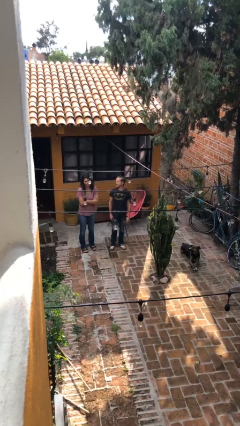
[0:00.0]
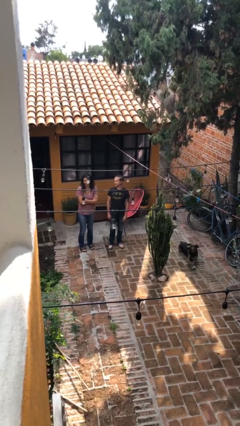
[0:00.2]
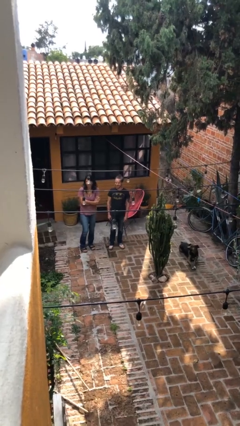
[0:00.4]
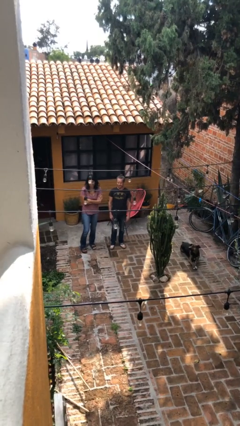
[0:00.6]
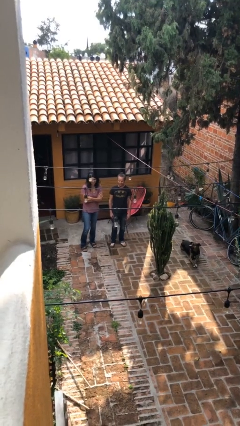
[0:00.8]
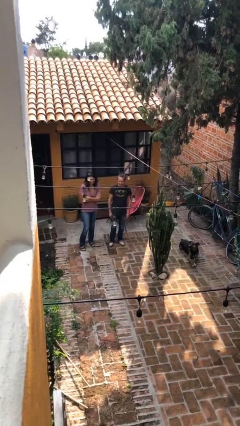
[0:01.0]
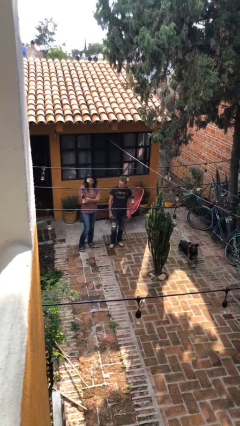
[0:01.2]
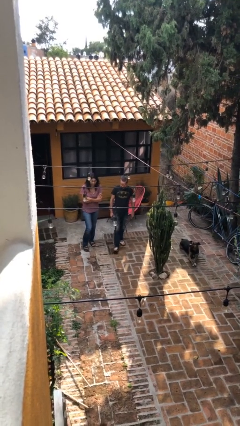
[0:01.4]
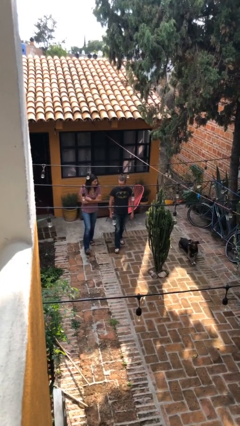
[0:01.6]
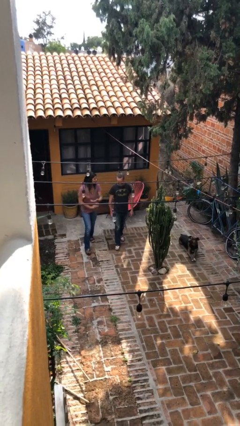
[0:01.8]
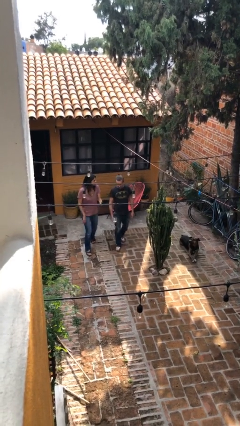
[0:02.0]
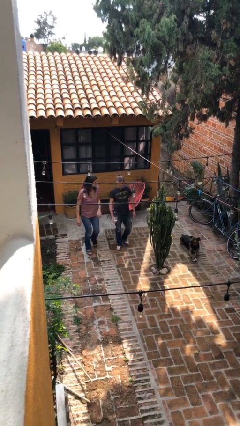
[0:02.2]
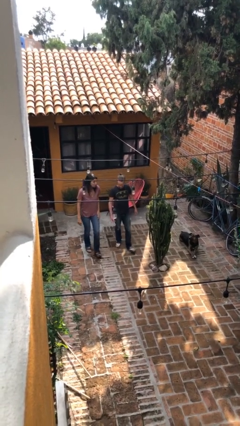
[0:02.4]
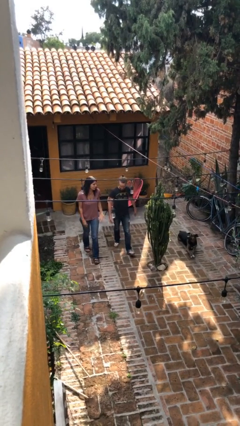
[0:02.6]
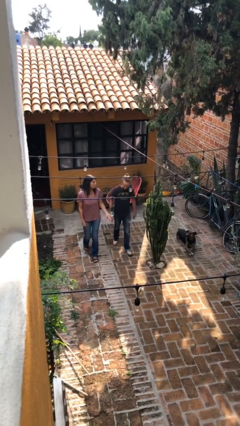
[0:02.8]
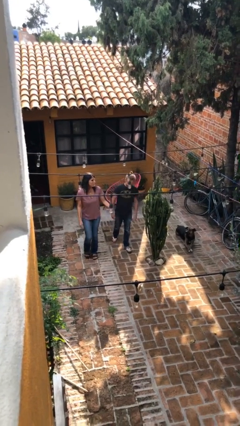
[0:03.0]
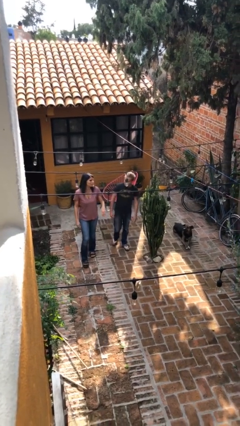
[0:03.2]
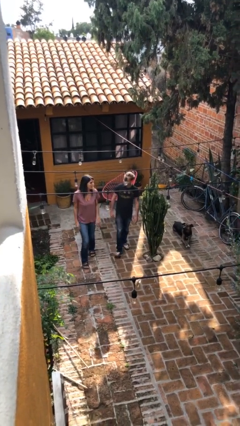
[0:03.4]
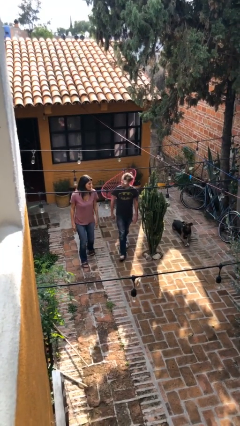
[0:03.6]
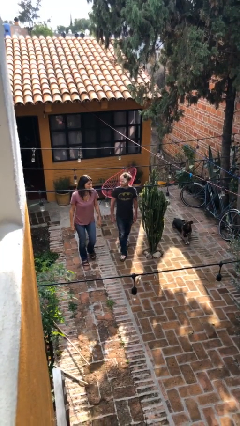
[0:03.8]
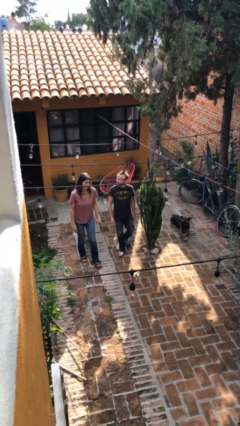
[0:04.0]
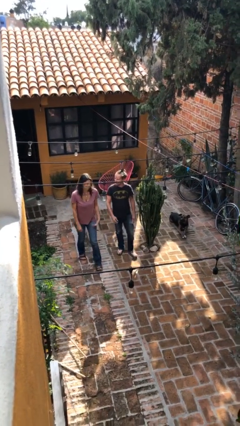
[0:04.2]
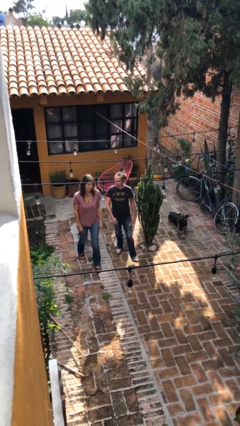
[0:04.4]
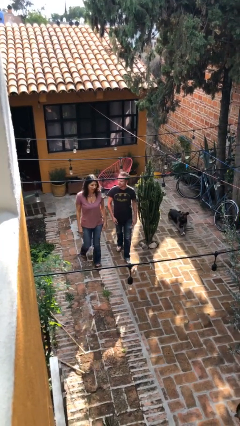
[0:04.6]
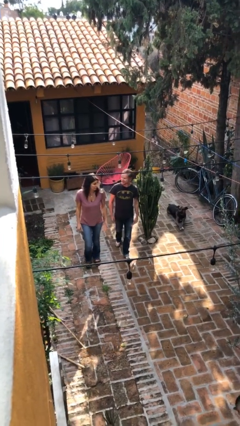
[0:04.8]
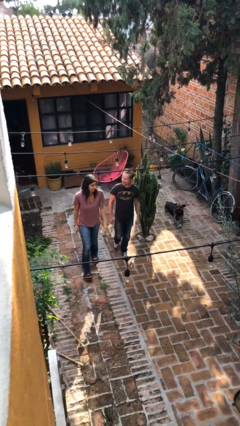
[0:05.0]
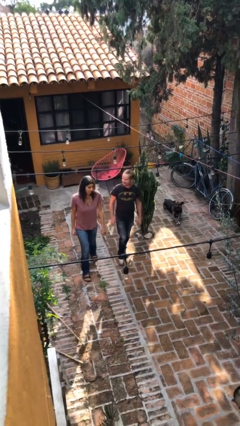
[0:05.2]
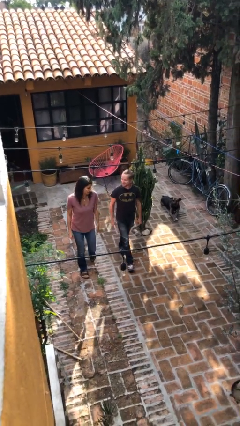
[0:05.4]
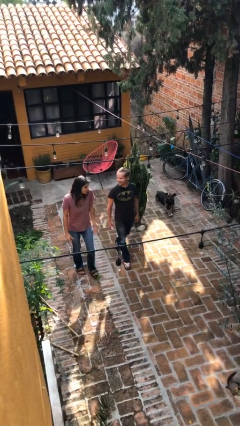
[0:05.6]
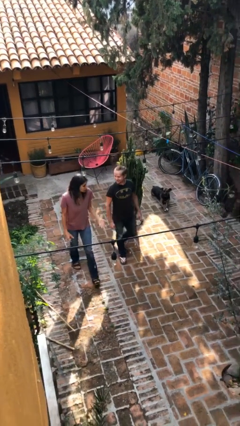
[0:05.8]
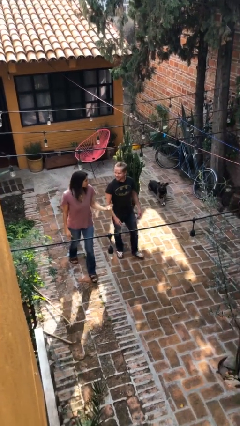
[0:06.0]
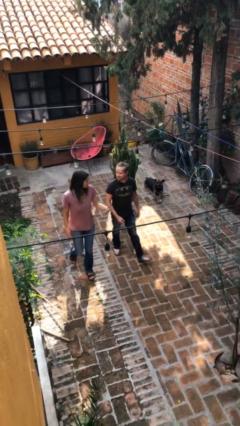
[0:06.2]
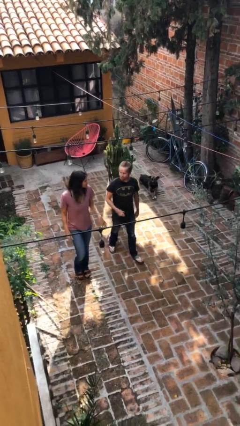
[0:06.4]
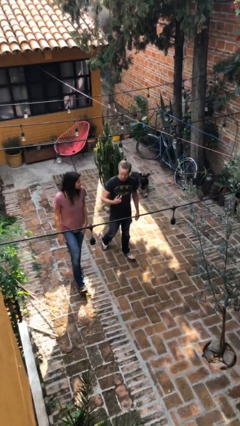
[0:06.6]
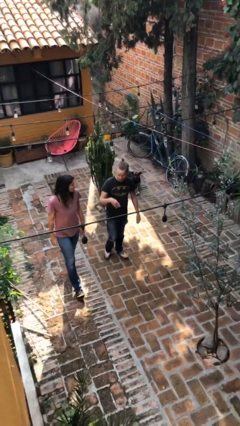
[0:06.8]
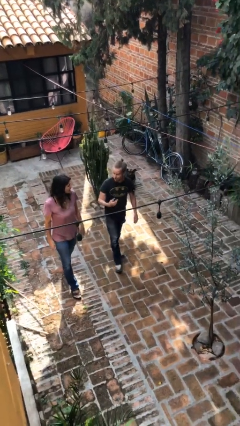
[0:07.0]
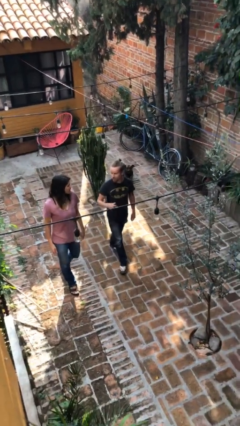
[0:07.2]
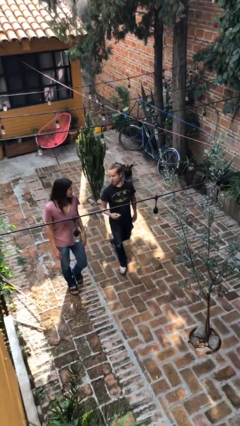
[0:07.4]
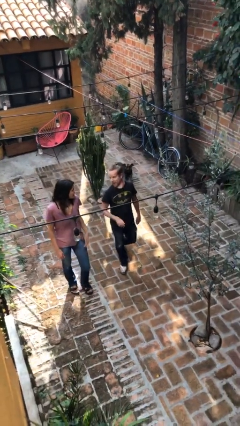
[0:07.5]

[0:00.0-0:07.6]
person talks to person

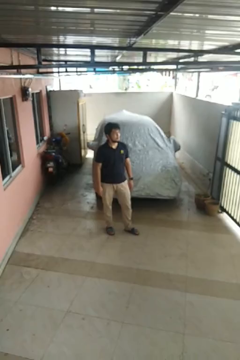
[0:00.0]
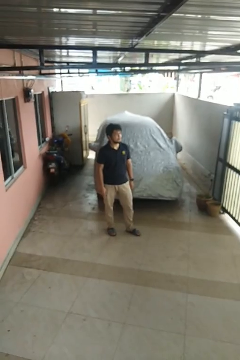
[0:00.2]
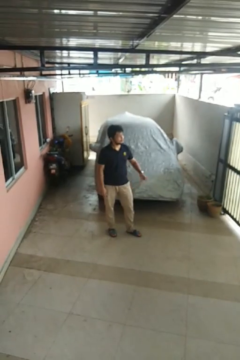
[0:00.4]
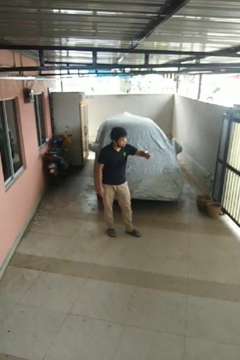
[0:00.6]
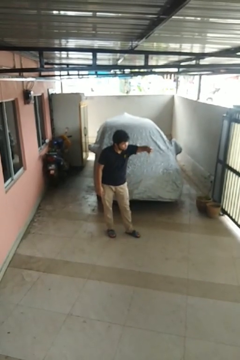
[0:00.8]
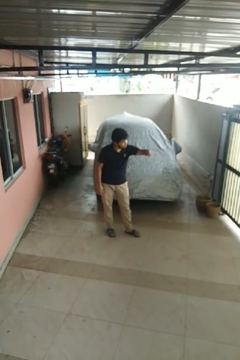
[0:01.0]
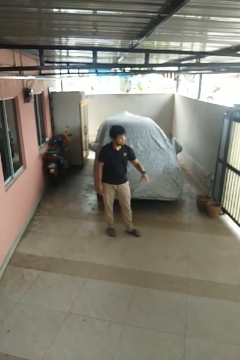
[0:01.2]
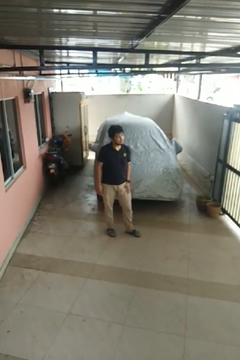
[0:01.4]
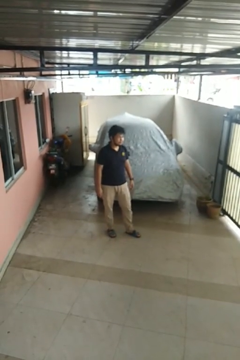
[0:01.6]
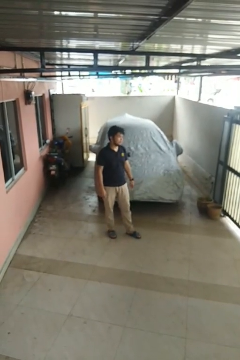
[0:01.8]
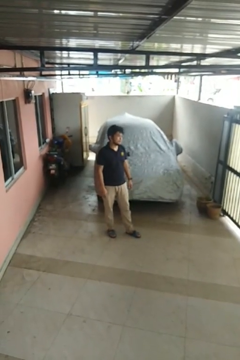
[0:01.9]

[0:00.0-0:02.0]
person points at person

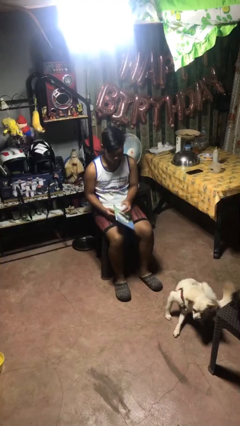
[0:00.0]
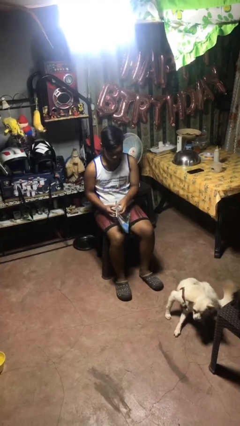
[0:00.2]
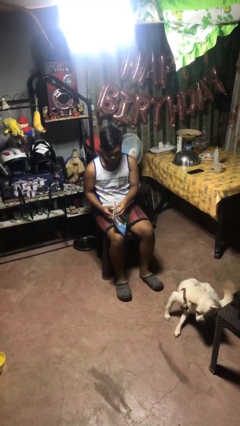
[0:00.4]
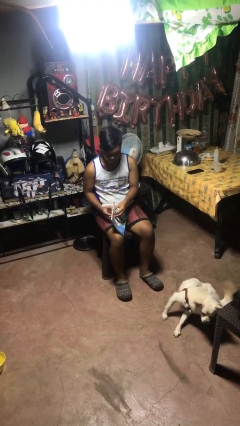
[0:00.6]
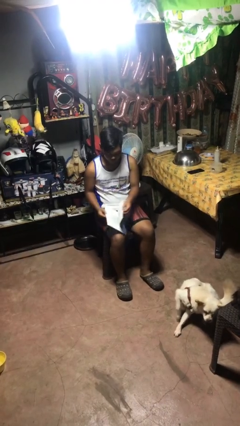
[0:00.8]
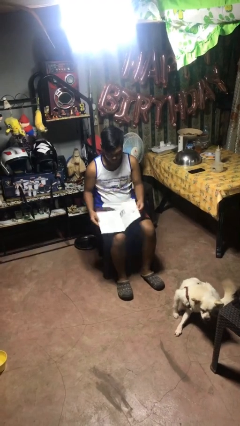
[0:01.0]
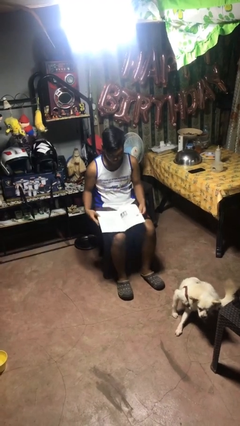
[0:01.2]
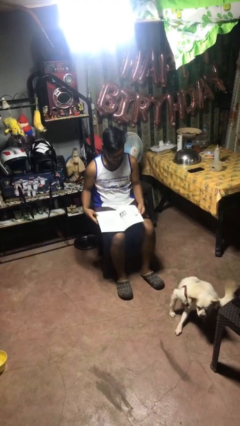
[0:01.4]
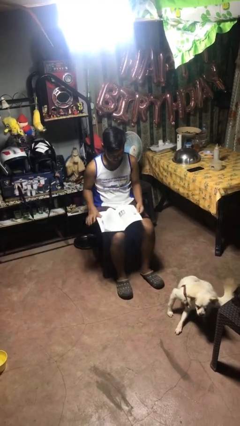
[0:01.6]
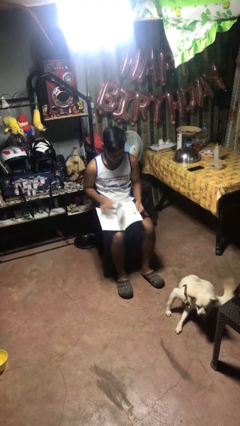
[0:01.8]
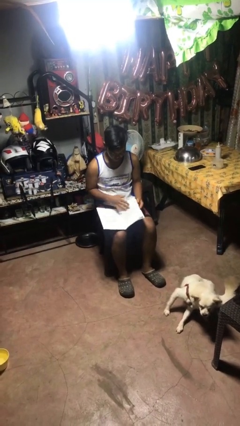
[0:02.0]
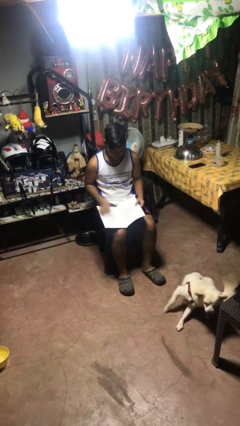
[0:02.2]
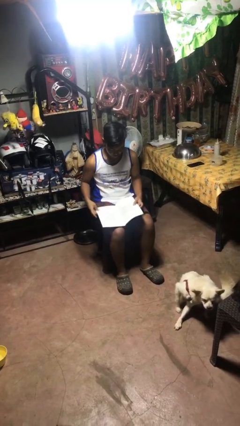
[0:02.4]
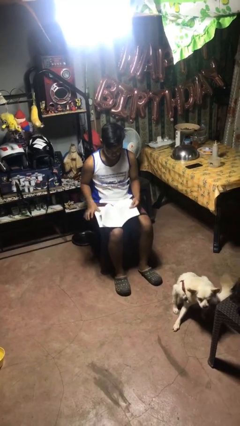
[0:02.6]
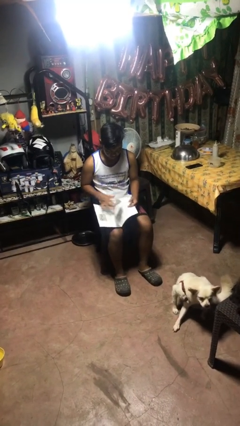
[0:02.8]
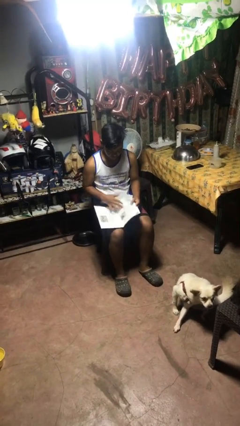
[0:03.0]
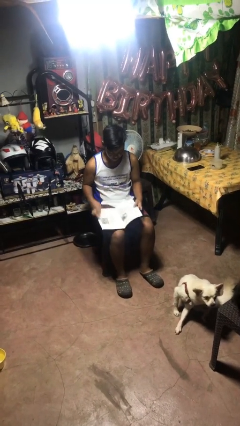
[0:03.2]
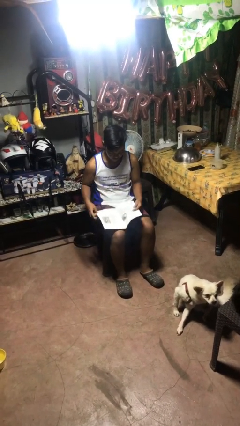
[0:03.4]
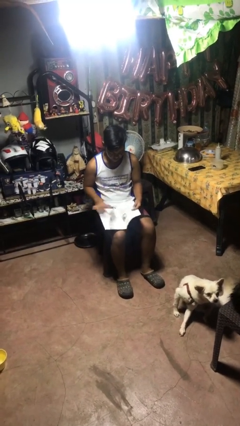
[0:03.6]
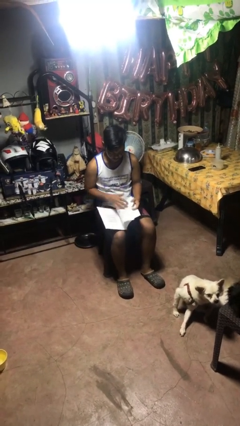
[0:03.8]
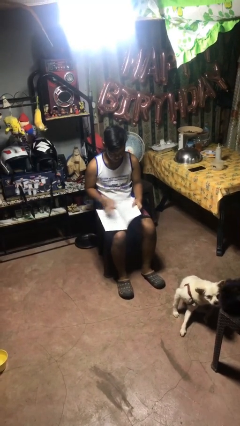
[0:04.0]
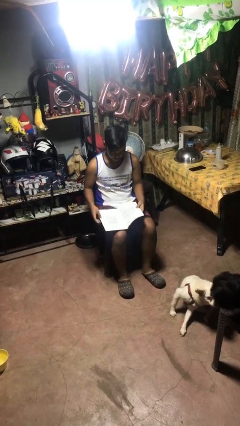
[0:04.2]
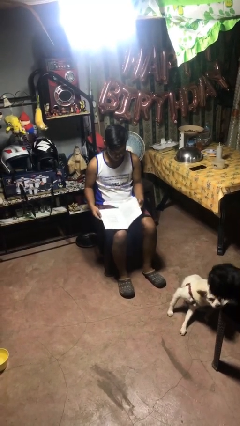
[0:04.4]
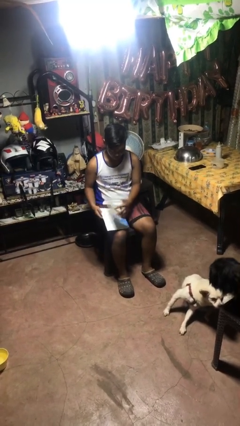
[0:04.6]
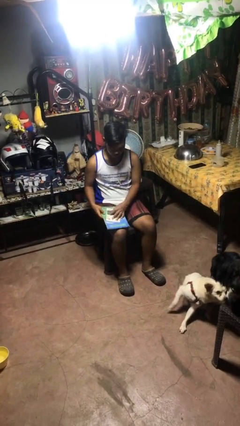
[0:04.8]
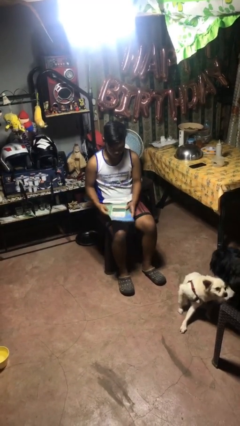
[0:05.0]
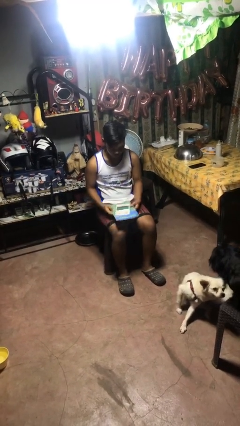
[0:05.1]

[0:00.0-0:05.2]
person reads magazine

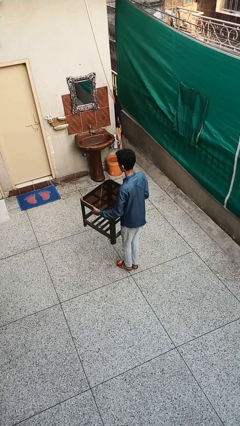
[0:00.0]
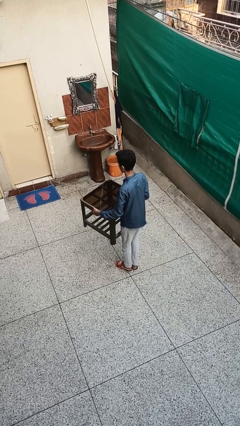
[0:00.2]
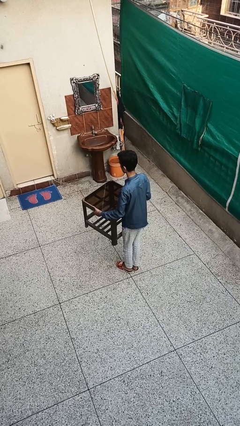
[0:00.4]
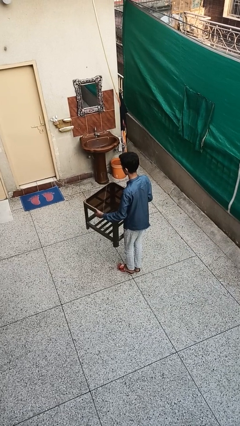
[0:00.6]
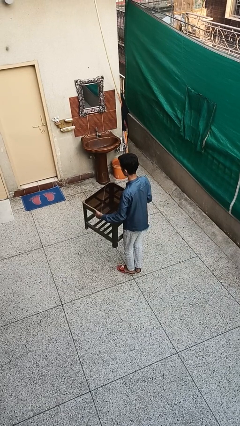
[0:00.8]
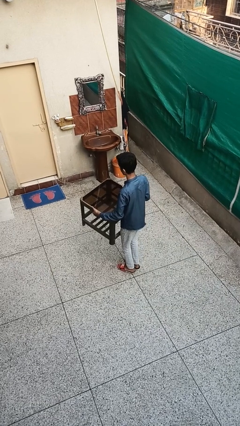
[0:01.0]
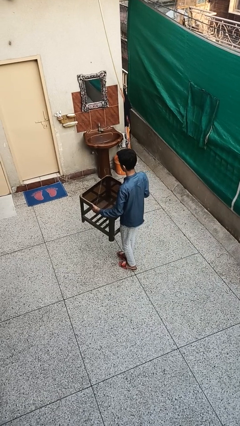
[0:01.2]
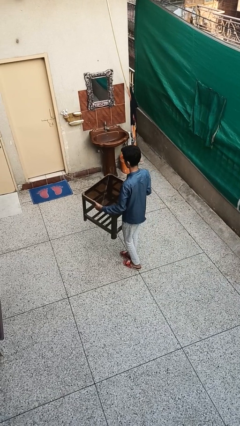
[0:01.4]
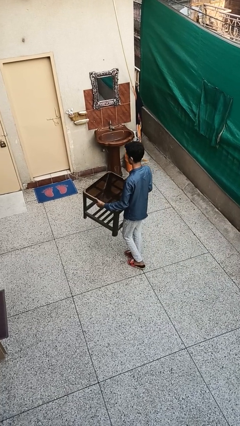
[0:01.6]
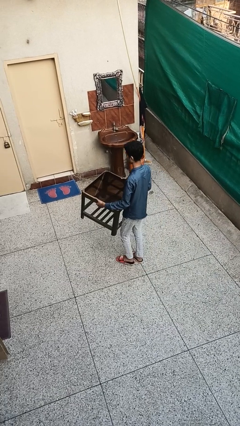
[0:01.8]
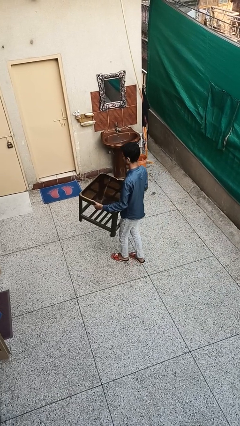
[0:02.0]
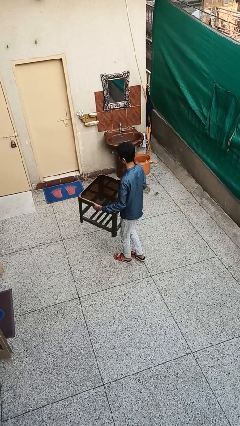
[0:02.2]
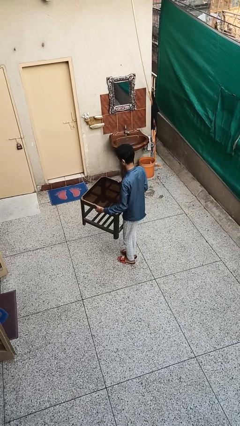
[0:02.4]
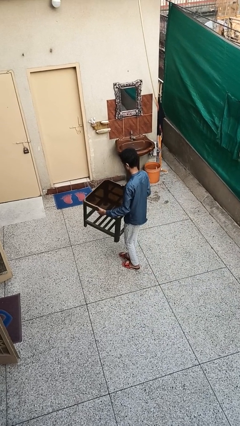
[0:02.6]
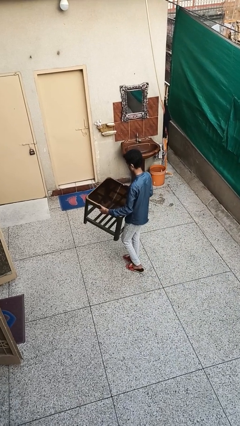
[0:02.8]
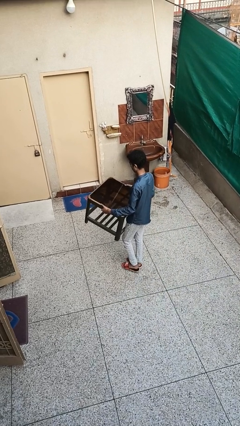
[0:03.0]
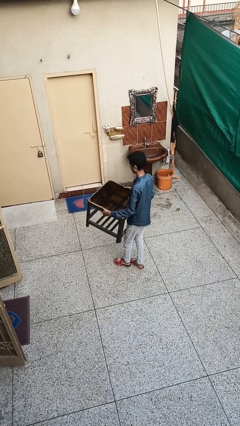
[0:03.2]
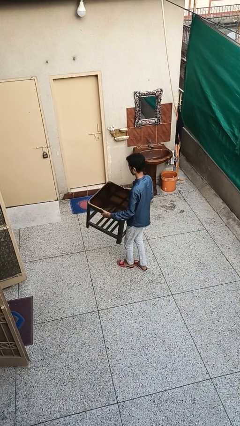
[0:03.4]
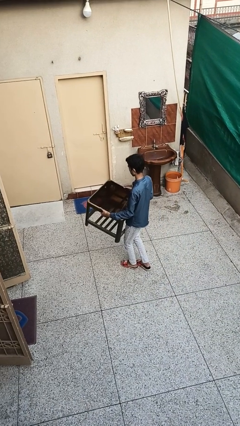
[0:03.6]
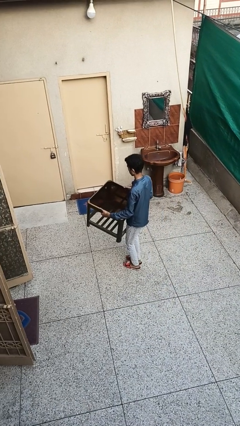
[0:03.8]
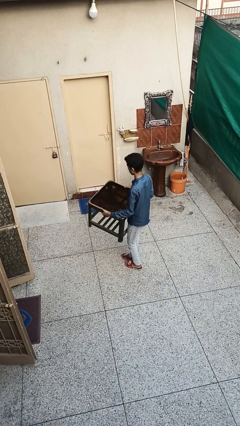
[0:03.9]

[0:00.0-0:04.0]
person carries furniture
